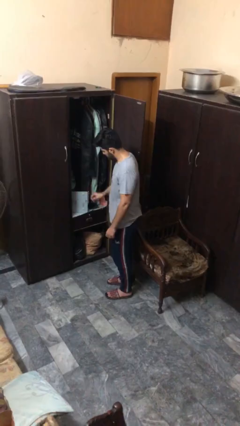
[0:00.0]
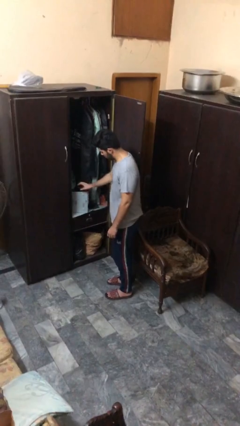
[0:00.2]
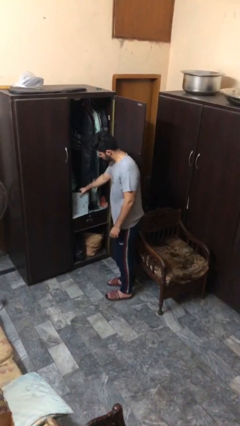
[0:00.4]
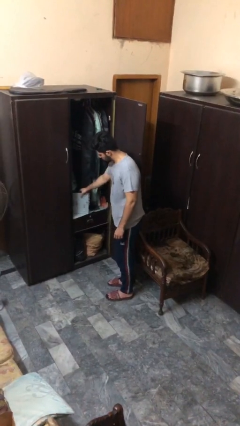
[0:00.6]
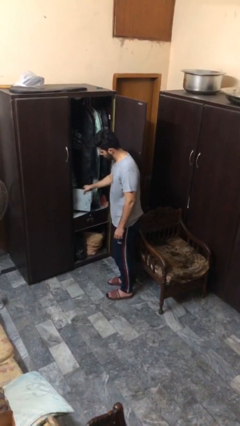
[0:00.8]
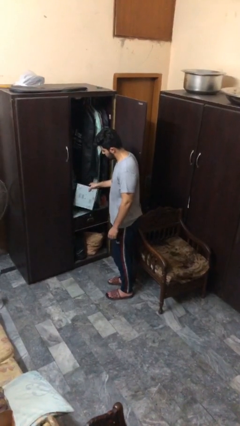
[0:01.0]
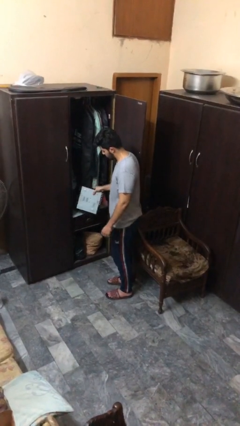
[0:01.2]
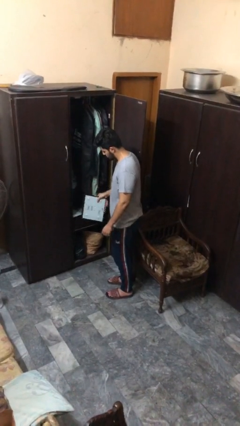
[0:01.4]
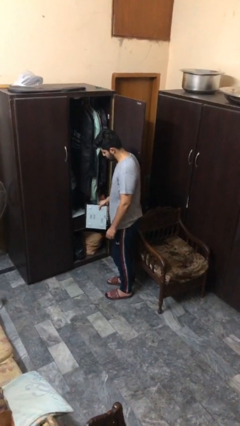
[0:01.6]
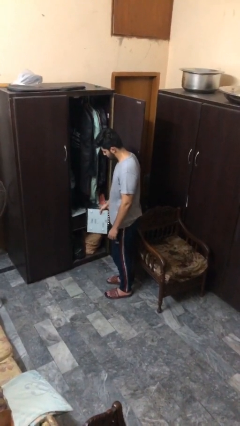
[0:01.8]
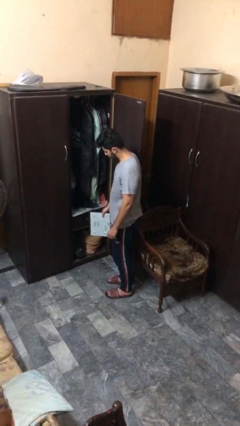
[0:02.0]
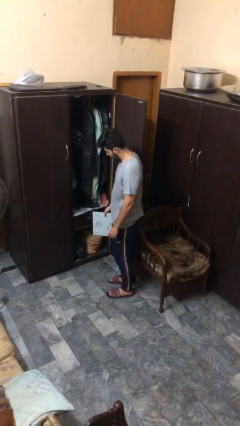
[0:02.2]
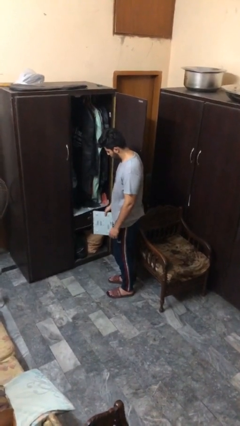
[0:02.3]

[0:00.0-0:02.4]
person picks up object from countertop

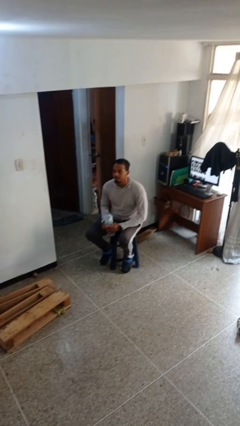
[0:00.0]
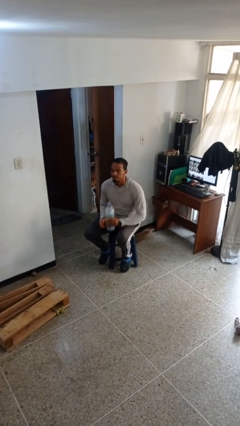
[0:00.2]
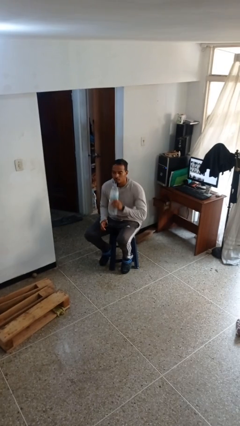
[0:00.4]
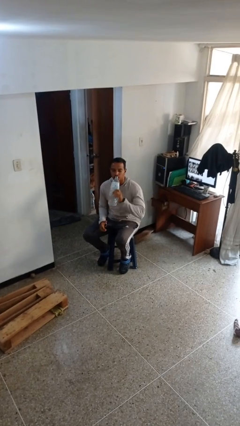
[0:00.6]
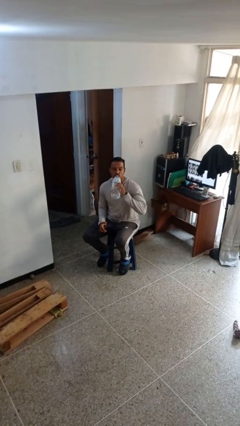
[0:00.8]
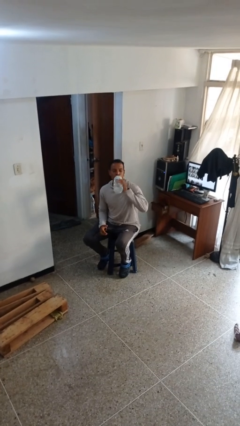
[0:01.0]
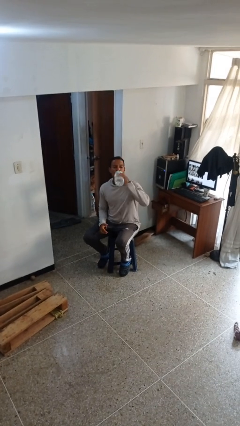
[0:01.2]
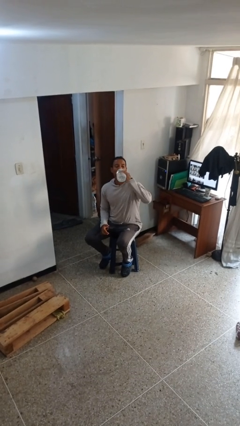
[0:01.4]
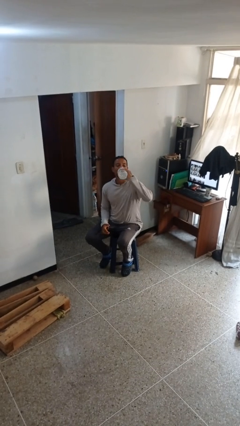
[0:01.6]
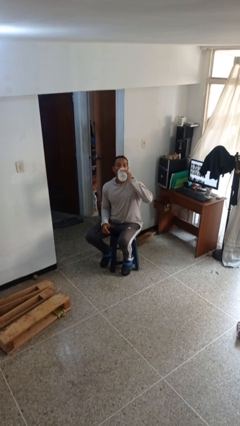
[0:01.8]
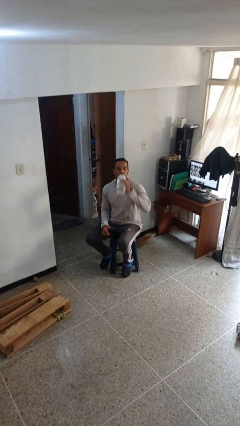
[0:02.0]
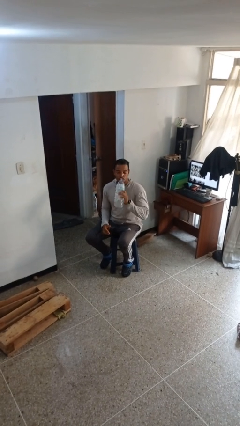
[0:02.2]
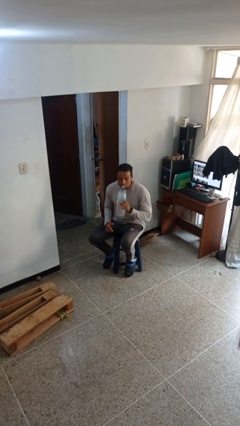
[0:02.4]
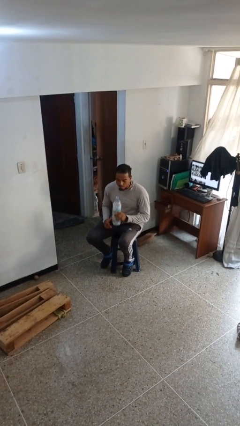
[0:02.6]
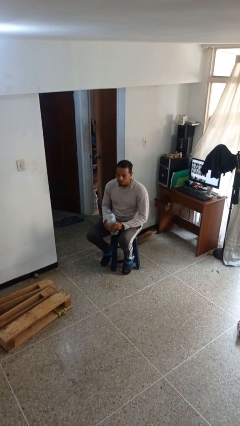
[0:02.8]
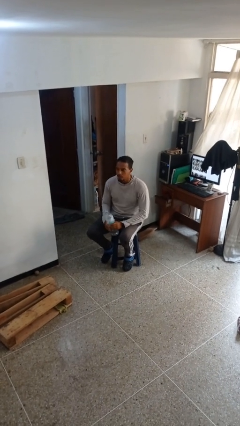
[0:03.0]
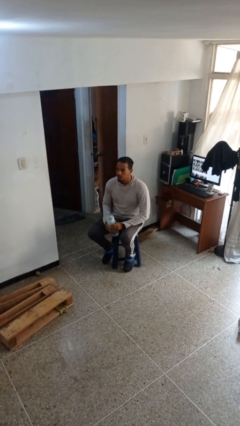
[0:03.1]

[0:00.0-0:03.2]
person drinks from bottle

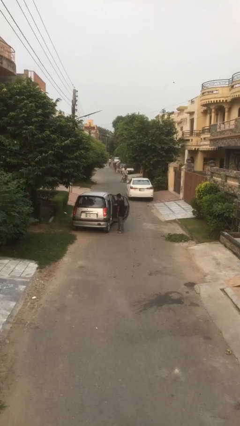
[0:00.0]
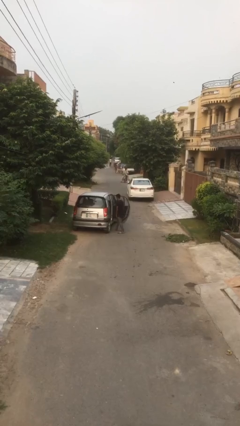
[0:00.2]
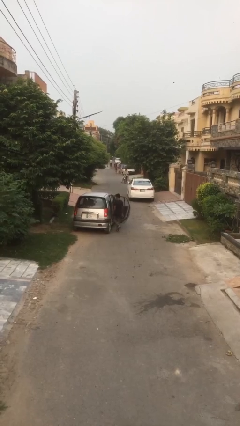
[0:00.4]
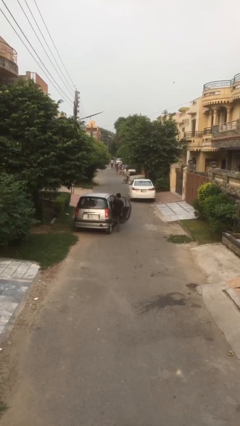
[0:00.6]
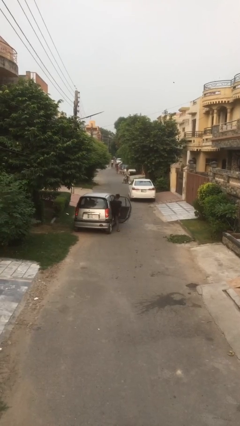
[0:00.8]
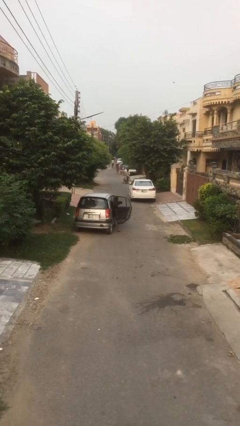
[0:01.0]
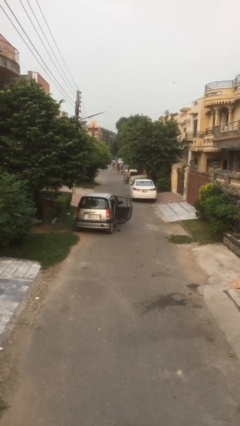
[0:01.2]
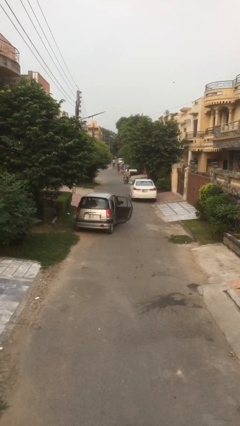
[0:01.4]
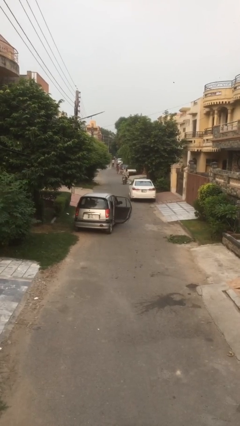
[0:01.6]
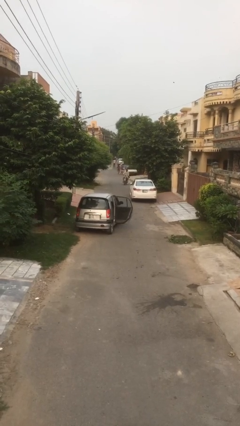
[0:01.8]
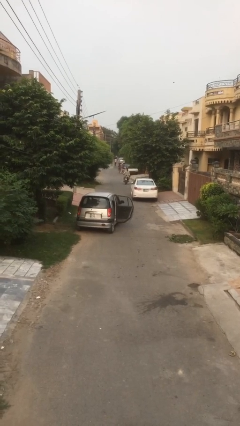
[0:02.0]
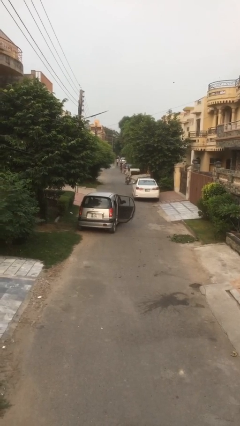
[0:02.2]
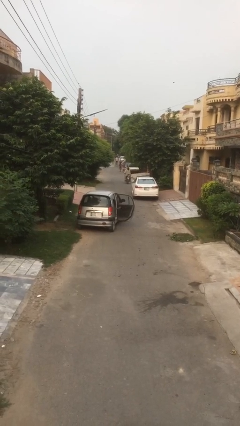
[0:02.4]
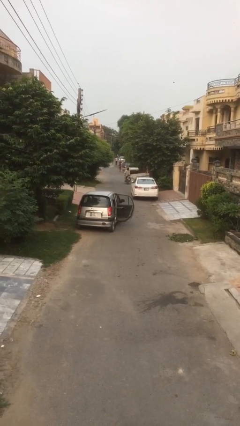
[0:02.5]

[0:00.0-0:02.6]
person enters car

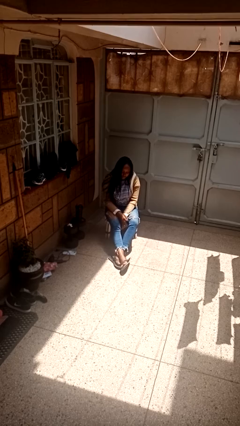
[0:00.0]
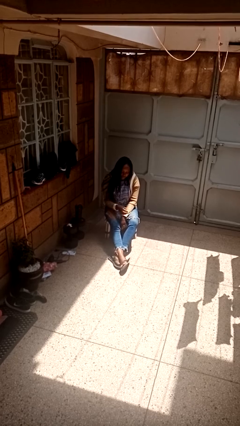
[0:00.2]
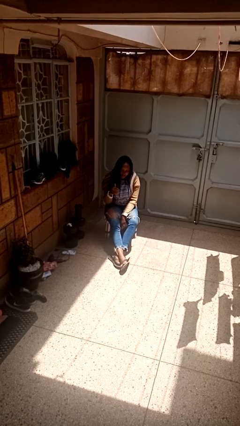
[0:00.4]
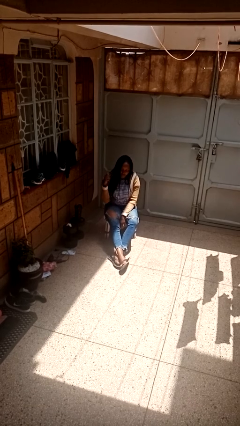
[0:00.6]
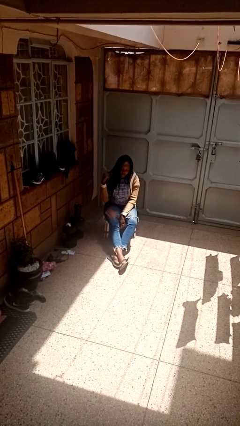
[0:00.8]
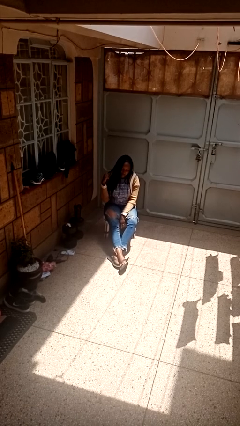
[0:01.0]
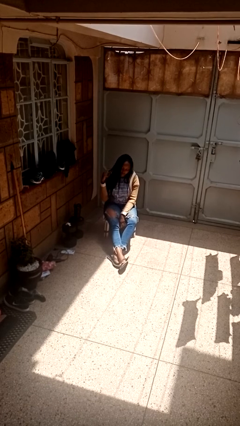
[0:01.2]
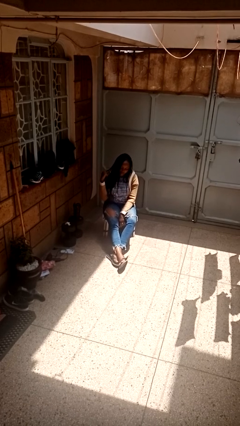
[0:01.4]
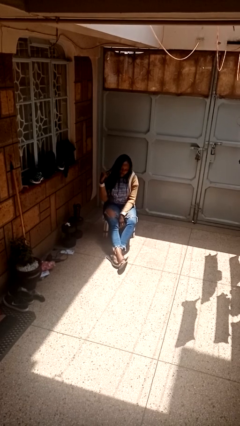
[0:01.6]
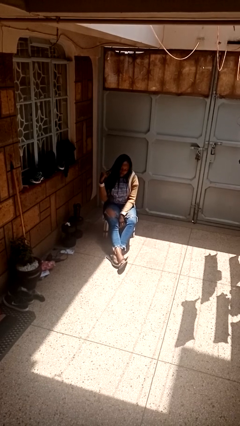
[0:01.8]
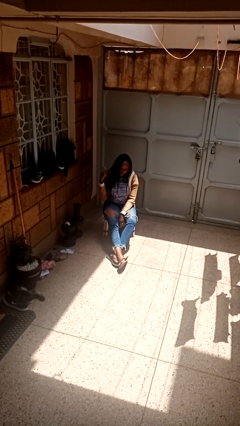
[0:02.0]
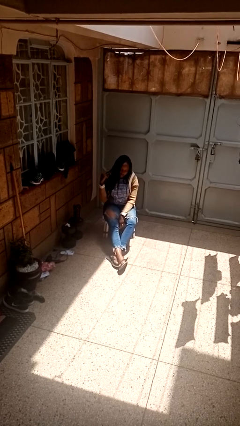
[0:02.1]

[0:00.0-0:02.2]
person gestures behind me

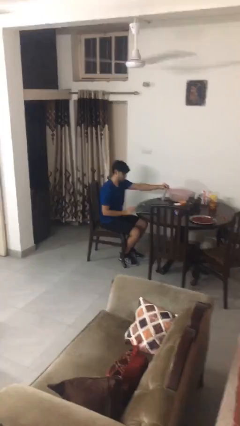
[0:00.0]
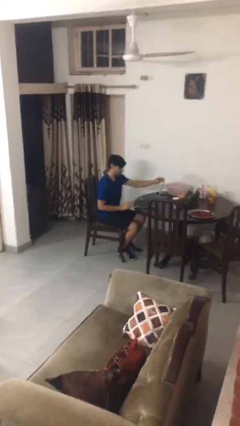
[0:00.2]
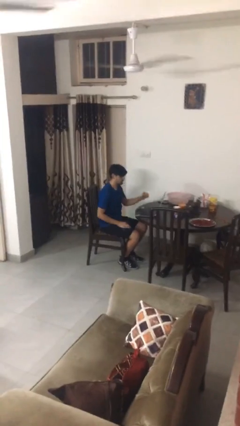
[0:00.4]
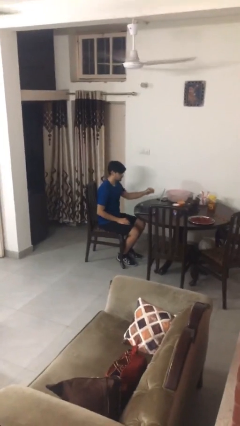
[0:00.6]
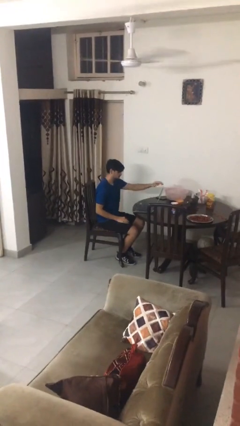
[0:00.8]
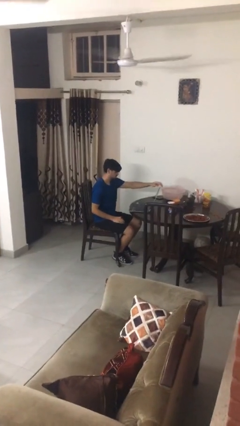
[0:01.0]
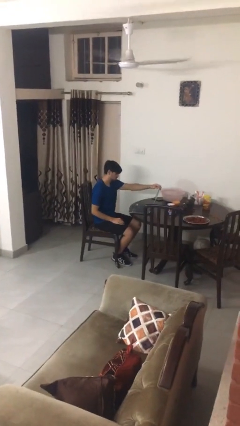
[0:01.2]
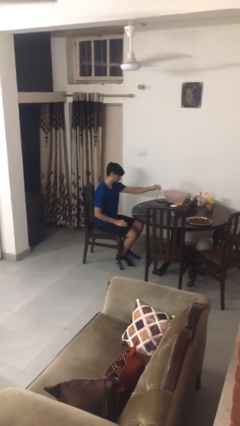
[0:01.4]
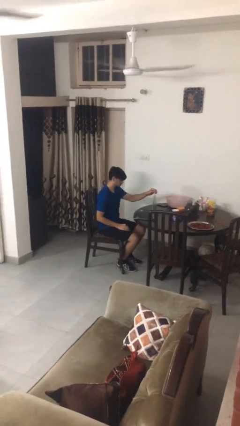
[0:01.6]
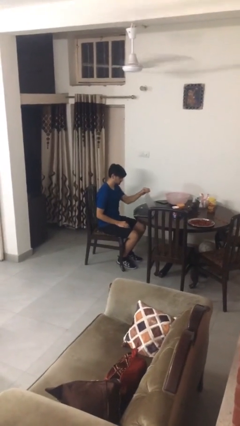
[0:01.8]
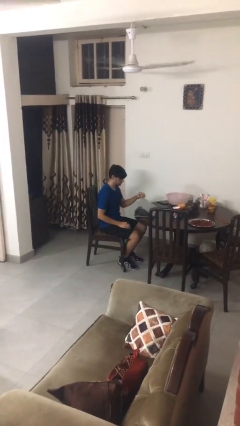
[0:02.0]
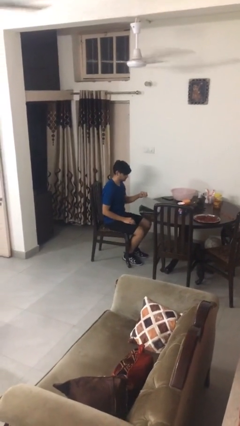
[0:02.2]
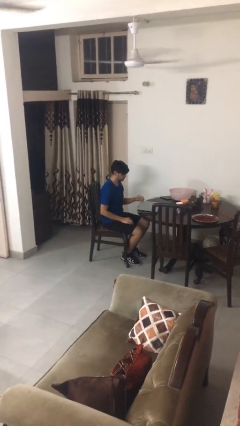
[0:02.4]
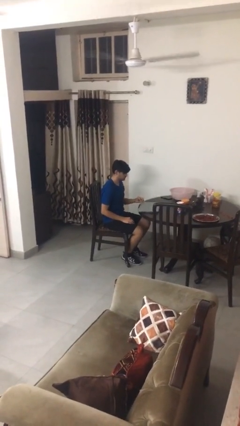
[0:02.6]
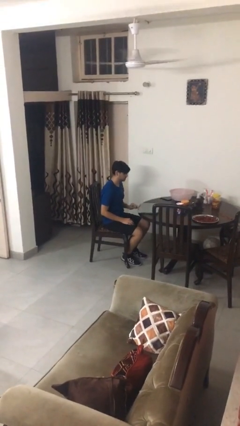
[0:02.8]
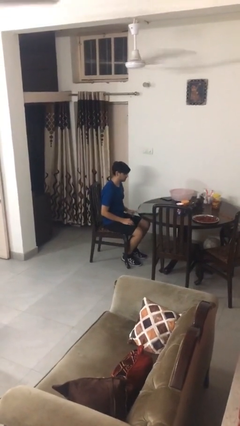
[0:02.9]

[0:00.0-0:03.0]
person closes laptop

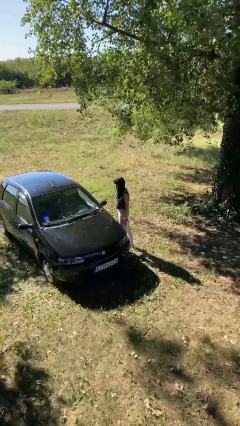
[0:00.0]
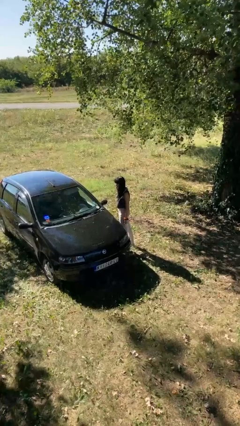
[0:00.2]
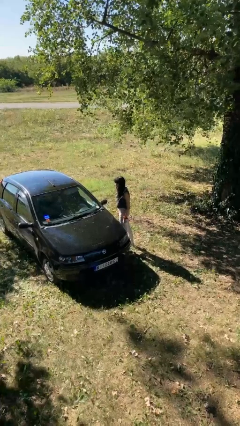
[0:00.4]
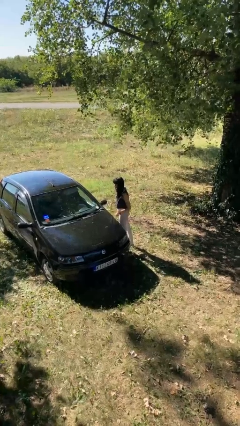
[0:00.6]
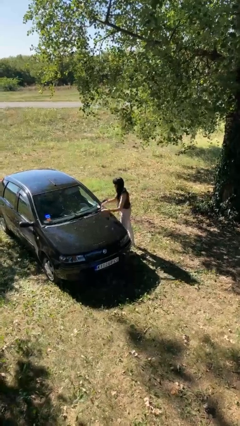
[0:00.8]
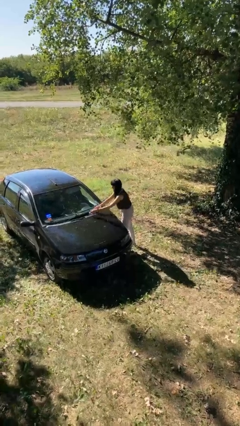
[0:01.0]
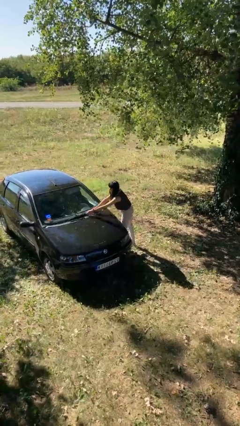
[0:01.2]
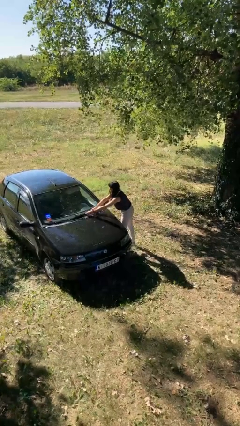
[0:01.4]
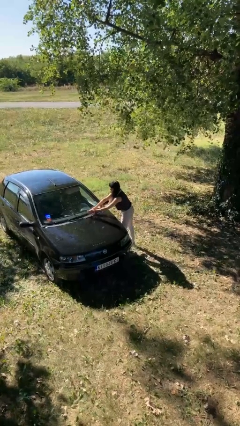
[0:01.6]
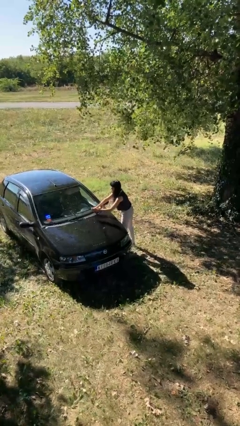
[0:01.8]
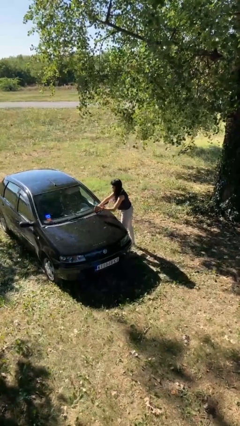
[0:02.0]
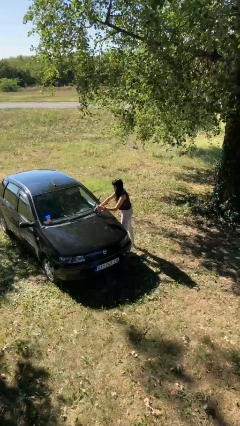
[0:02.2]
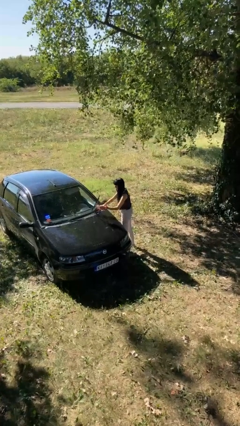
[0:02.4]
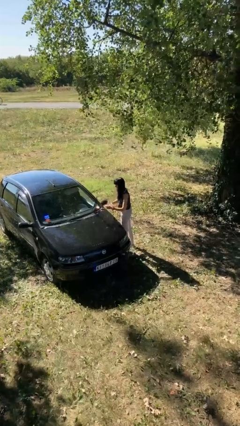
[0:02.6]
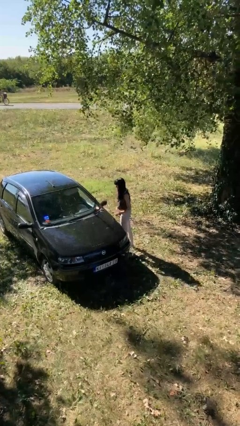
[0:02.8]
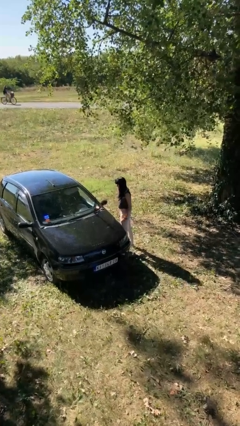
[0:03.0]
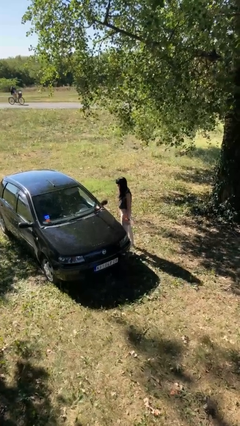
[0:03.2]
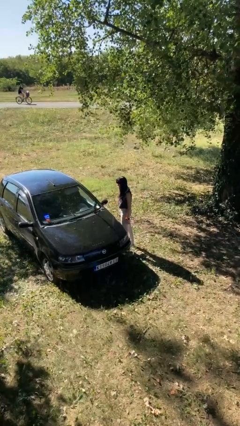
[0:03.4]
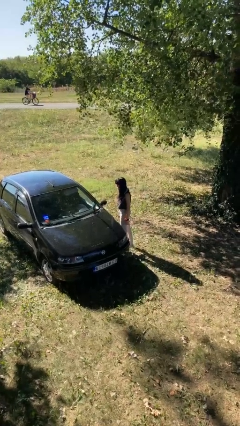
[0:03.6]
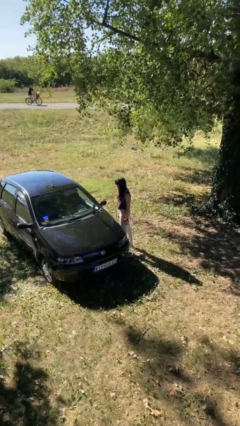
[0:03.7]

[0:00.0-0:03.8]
person flips up car wipers

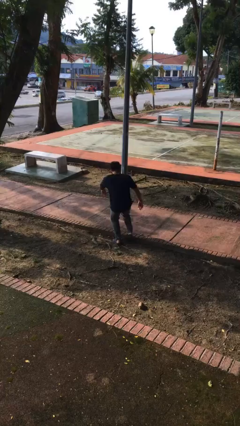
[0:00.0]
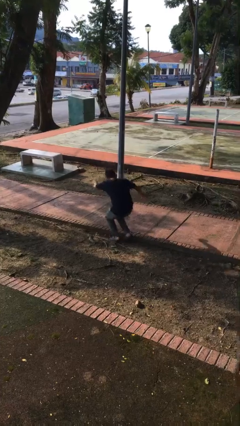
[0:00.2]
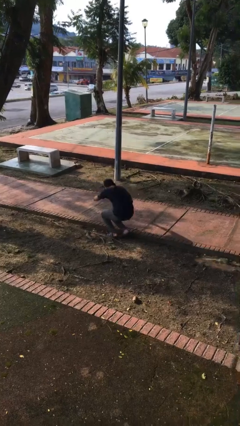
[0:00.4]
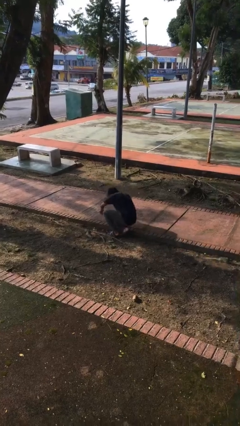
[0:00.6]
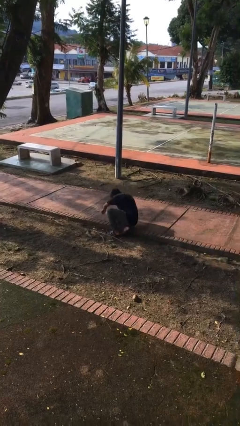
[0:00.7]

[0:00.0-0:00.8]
person trips on object on floor
